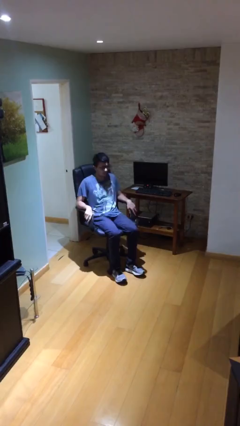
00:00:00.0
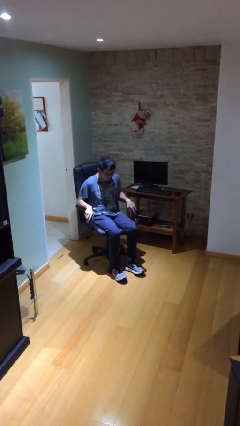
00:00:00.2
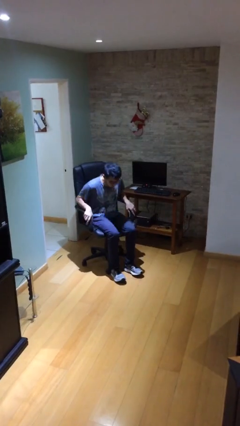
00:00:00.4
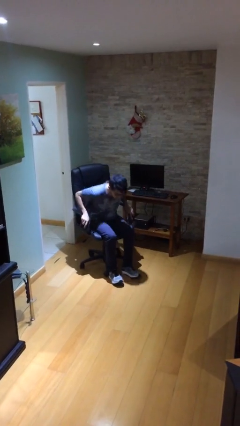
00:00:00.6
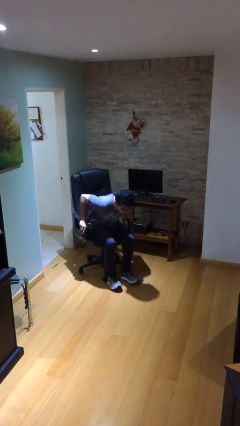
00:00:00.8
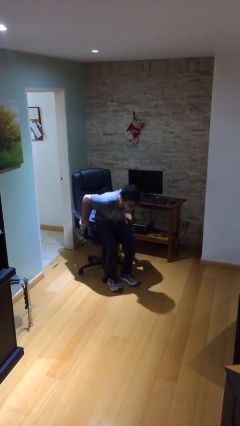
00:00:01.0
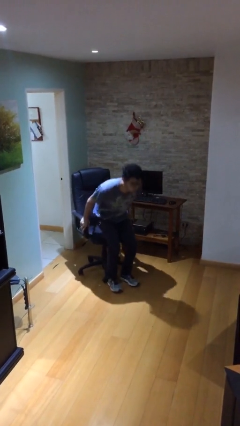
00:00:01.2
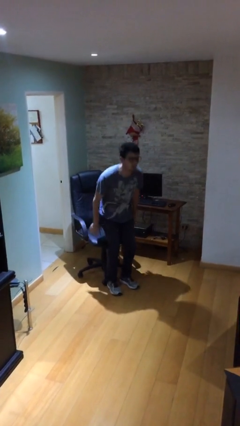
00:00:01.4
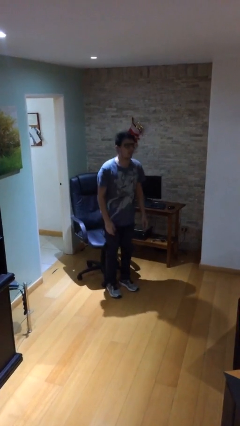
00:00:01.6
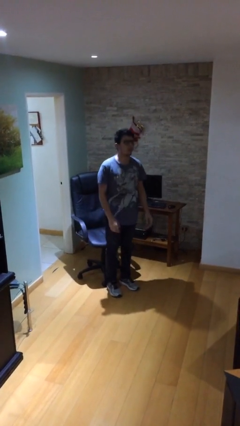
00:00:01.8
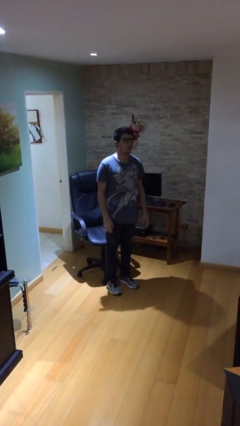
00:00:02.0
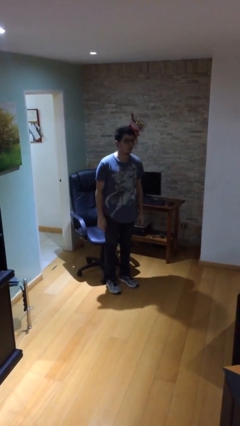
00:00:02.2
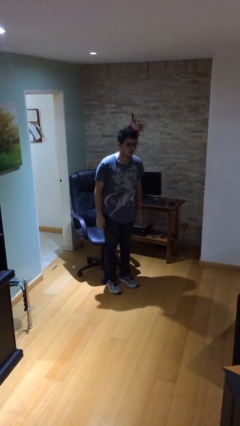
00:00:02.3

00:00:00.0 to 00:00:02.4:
person stands up

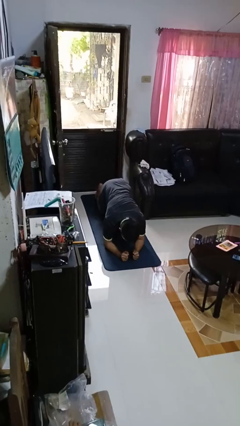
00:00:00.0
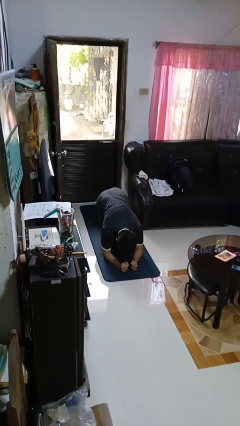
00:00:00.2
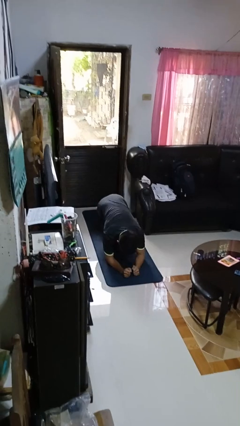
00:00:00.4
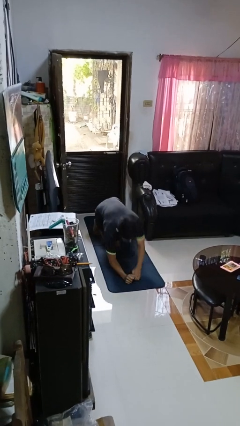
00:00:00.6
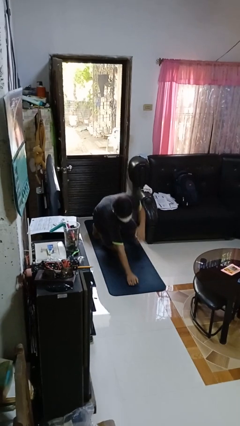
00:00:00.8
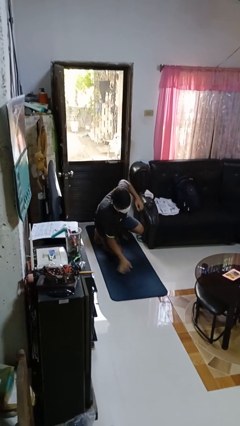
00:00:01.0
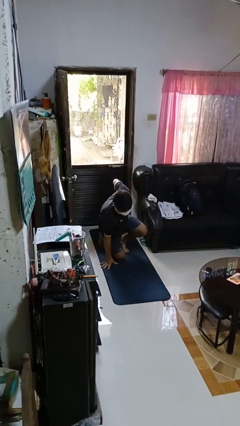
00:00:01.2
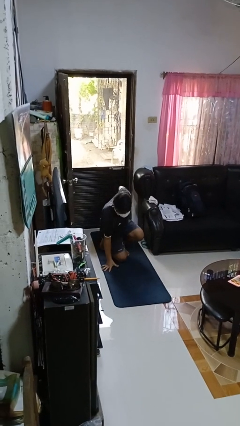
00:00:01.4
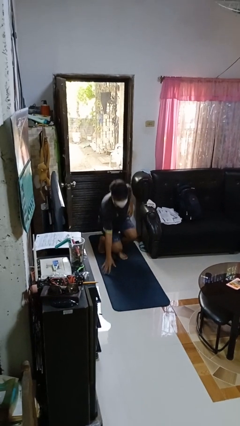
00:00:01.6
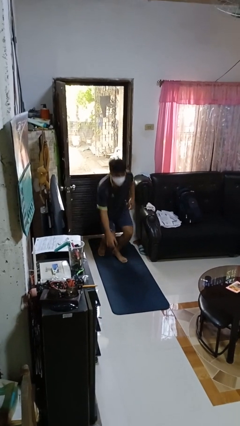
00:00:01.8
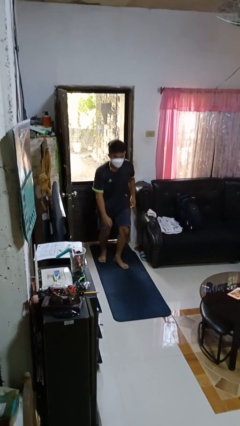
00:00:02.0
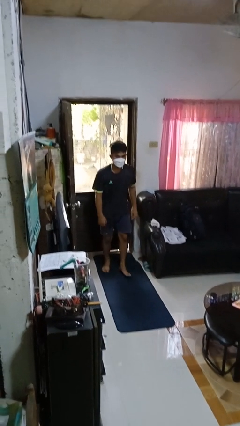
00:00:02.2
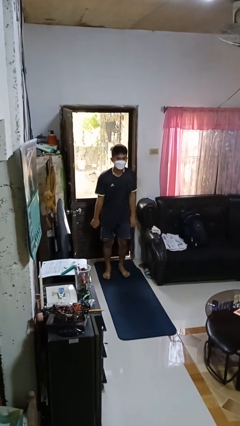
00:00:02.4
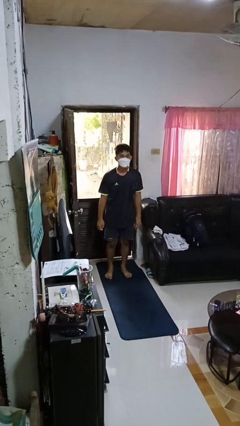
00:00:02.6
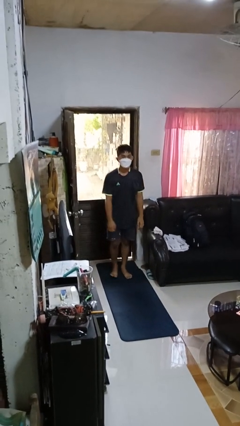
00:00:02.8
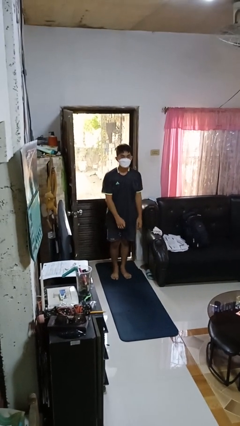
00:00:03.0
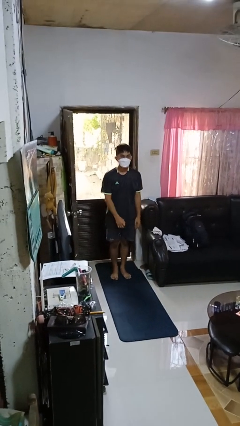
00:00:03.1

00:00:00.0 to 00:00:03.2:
person stands up from floor

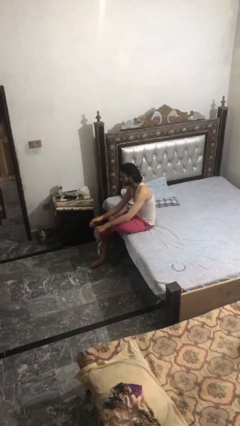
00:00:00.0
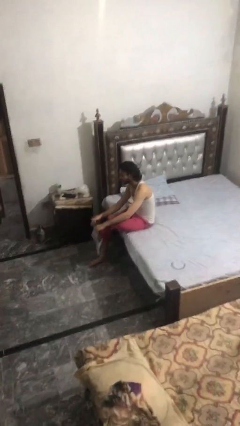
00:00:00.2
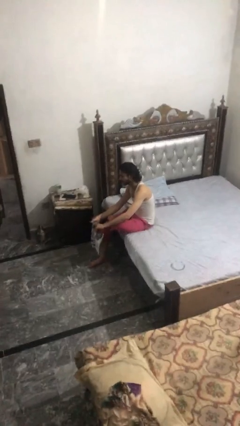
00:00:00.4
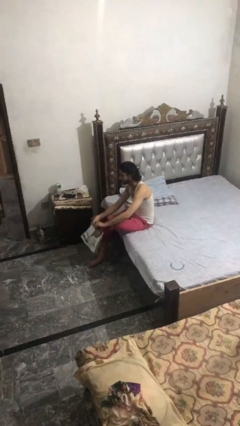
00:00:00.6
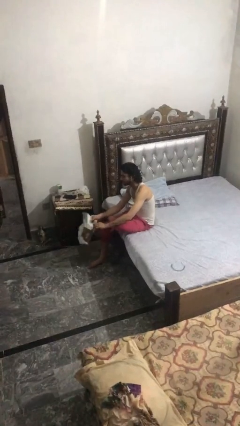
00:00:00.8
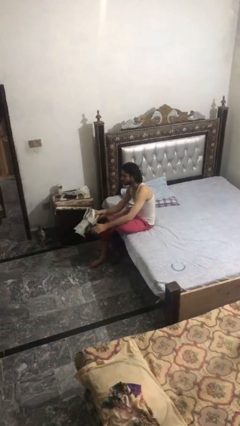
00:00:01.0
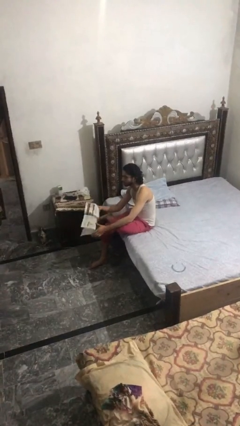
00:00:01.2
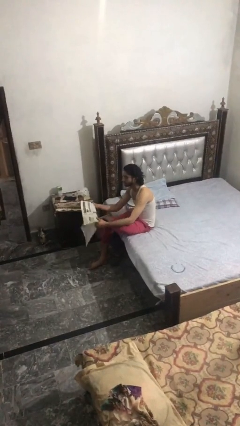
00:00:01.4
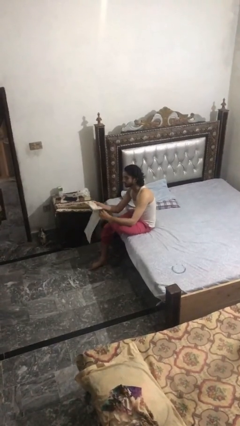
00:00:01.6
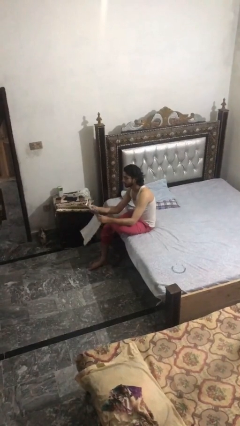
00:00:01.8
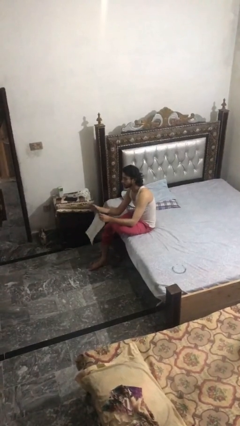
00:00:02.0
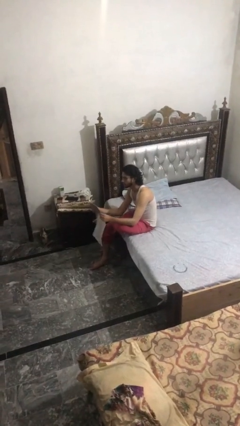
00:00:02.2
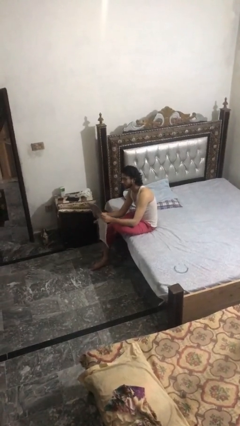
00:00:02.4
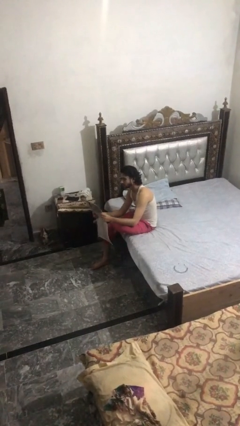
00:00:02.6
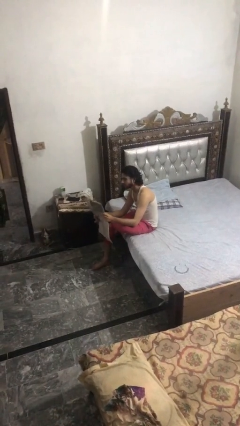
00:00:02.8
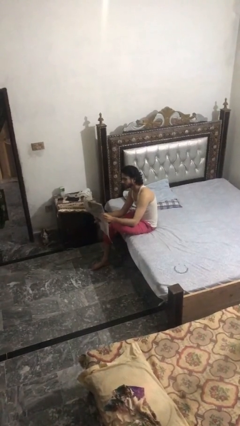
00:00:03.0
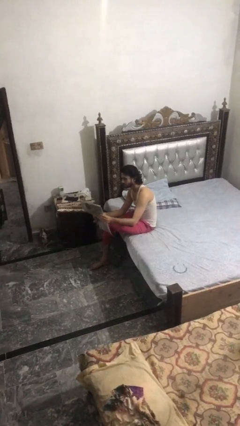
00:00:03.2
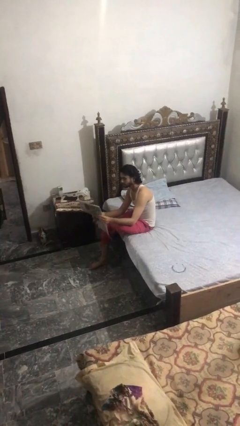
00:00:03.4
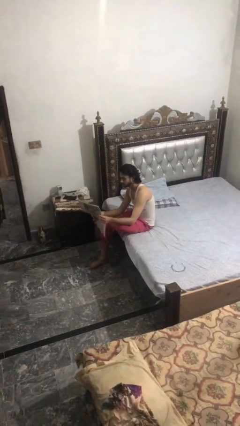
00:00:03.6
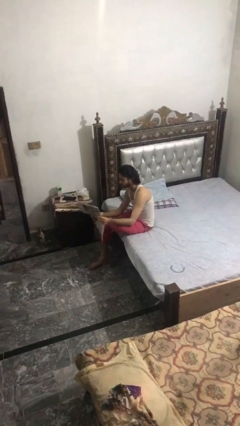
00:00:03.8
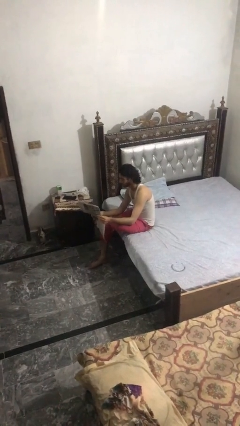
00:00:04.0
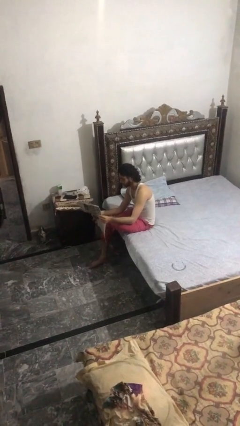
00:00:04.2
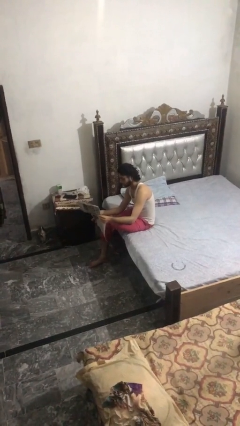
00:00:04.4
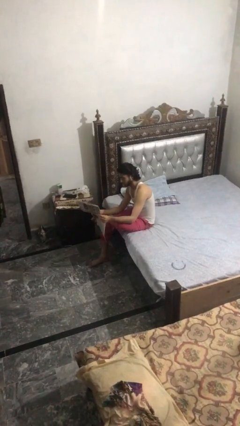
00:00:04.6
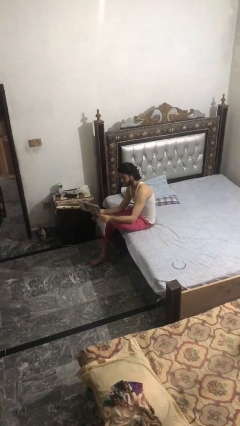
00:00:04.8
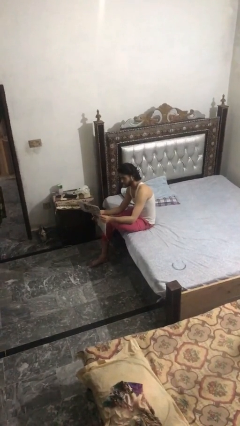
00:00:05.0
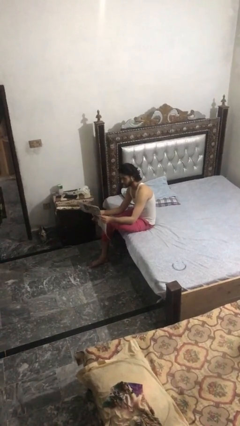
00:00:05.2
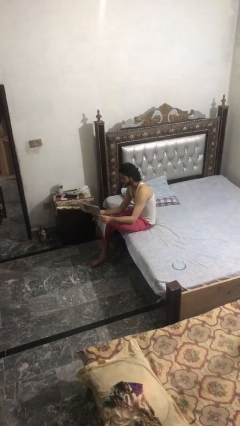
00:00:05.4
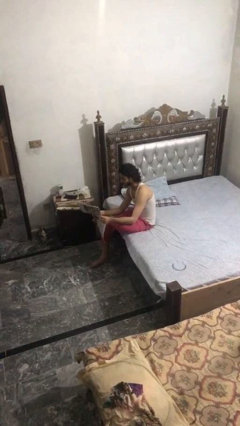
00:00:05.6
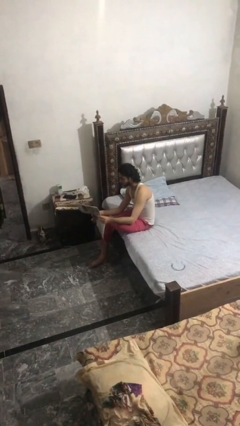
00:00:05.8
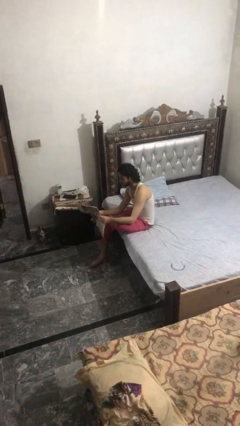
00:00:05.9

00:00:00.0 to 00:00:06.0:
person reads newspaper

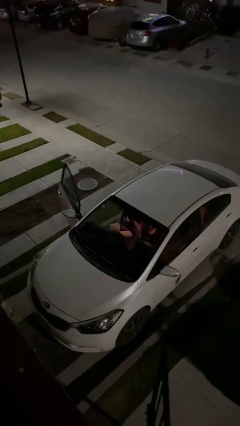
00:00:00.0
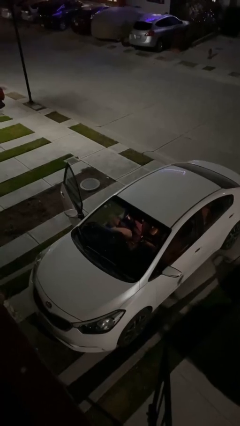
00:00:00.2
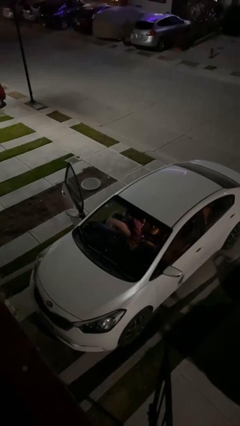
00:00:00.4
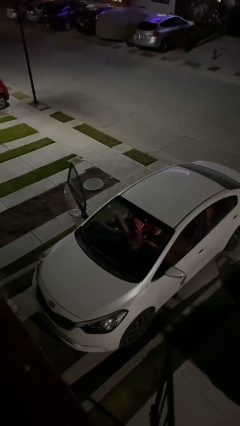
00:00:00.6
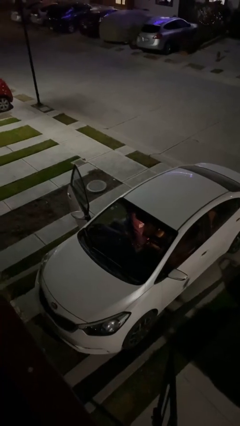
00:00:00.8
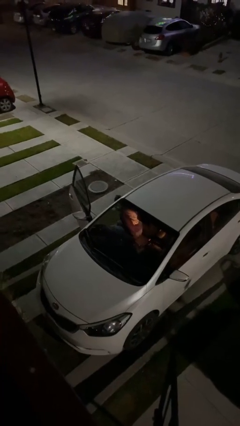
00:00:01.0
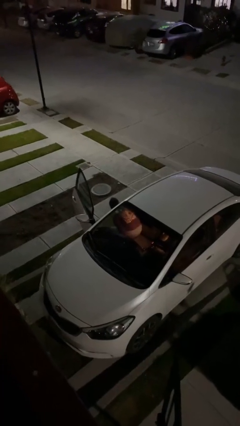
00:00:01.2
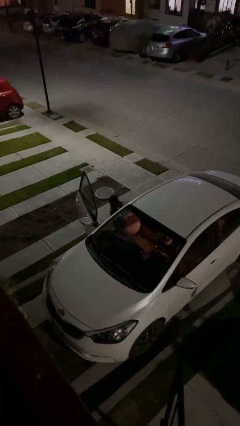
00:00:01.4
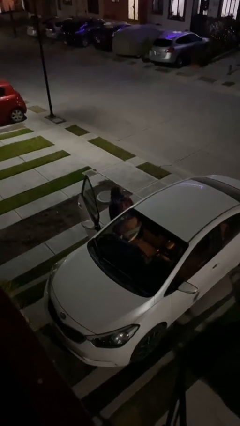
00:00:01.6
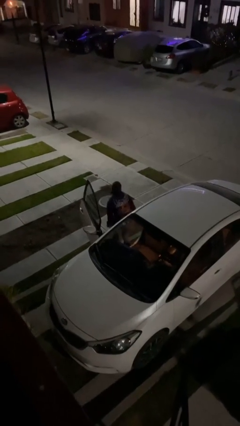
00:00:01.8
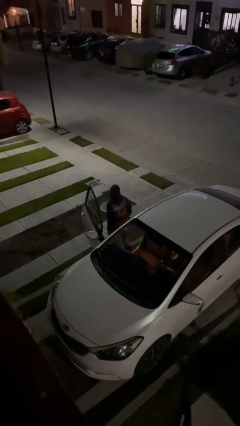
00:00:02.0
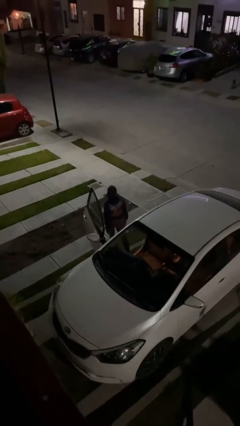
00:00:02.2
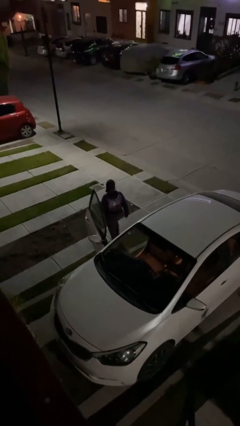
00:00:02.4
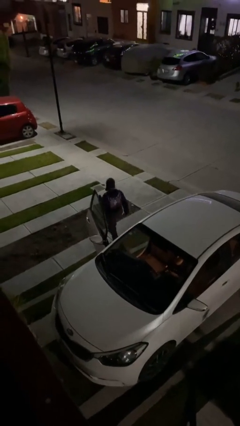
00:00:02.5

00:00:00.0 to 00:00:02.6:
person exits car

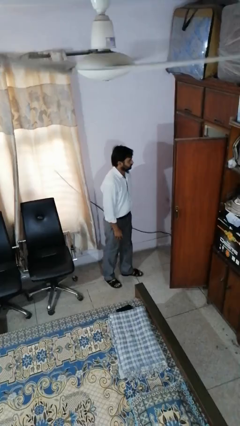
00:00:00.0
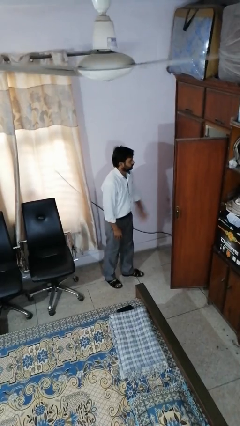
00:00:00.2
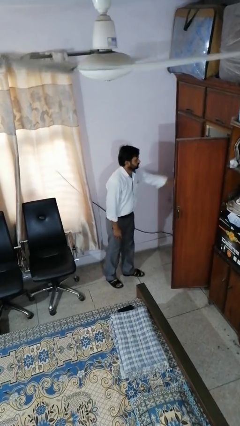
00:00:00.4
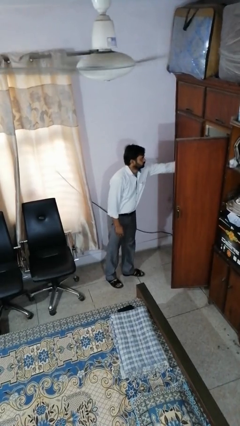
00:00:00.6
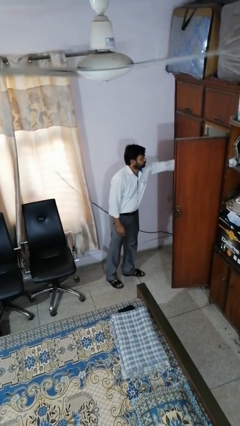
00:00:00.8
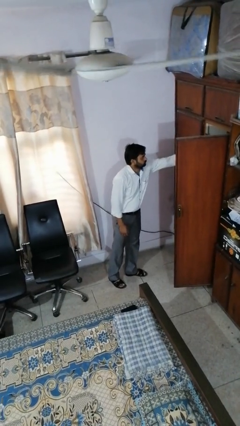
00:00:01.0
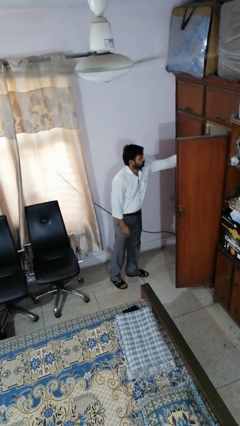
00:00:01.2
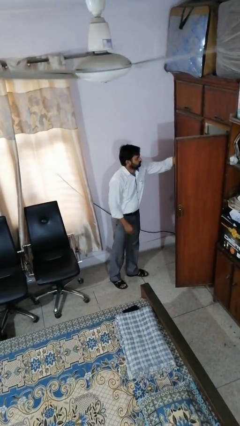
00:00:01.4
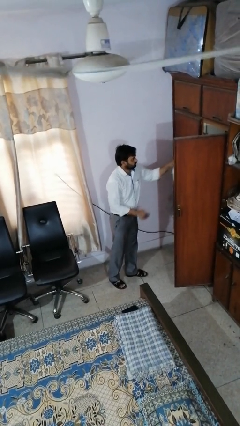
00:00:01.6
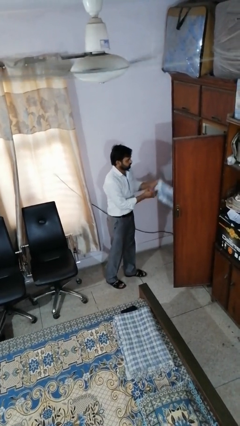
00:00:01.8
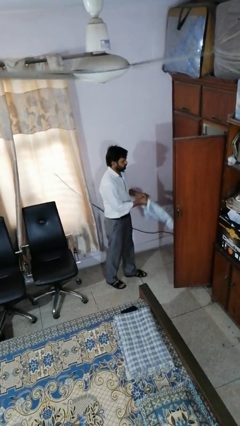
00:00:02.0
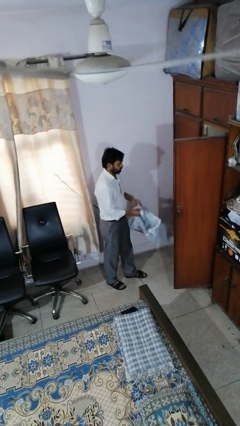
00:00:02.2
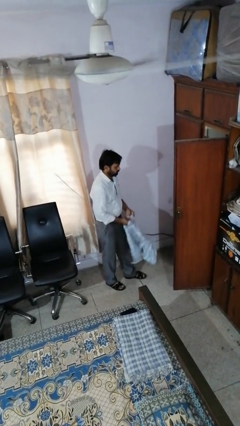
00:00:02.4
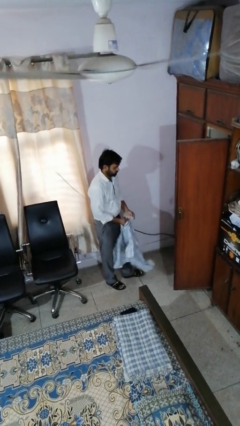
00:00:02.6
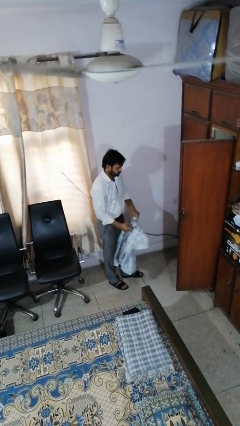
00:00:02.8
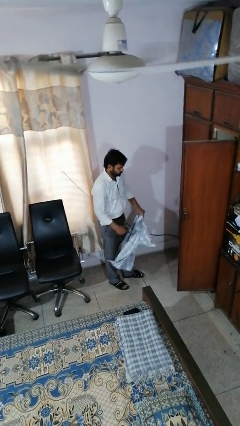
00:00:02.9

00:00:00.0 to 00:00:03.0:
person takes clothes from closet

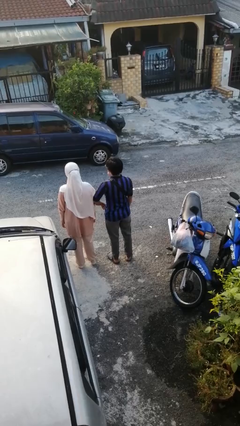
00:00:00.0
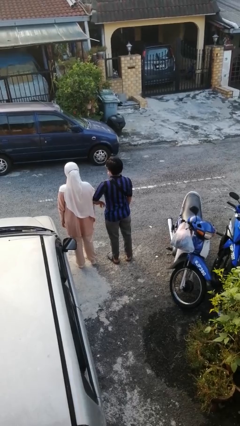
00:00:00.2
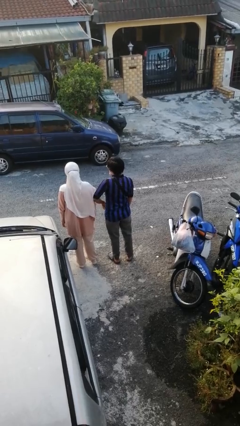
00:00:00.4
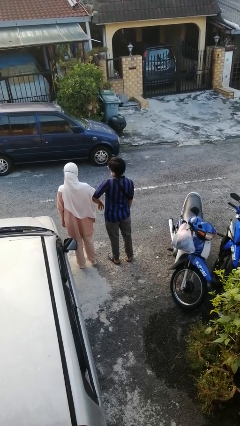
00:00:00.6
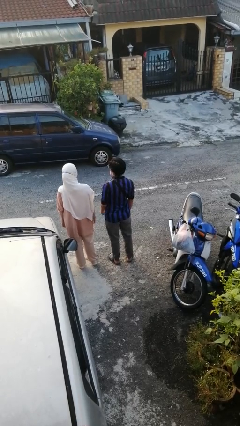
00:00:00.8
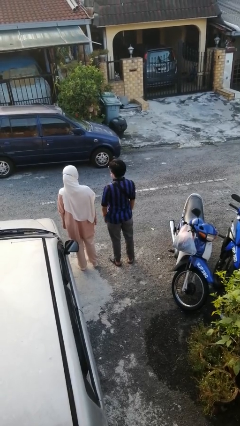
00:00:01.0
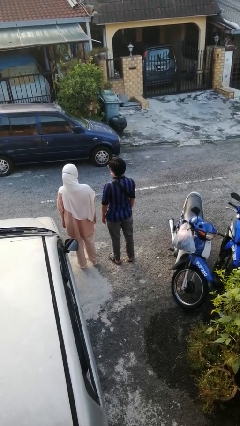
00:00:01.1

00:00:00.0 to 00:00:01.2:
person nudges person with elbow
